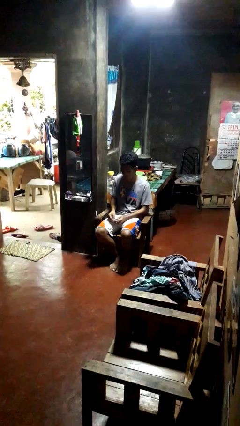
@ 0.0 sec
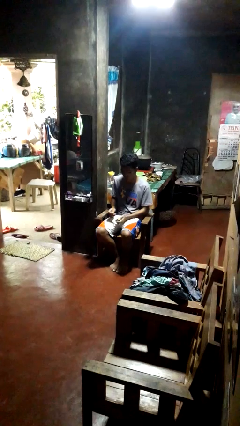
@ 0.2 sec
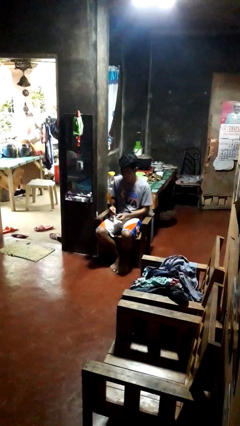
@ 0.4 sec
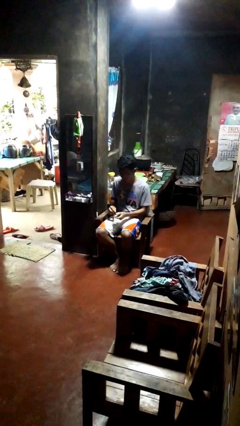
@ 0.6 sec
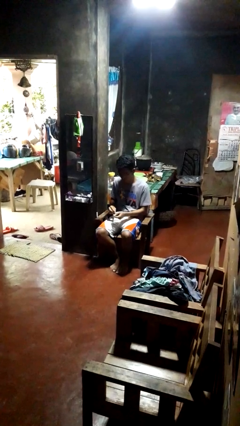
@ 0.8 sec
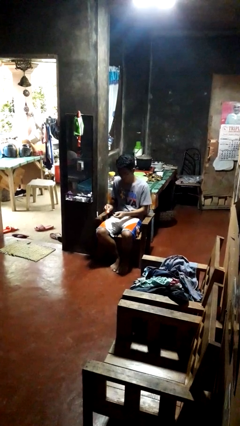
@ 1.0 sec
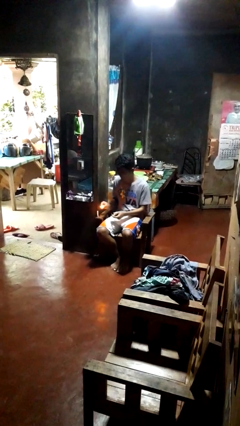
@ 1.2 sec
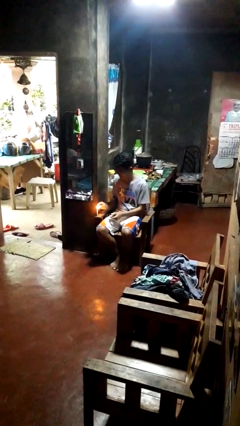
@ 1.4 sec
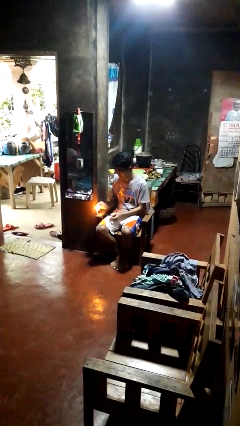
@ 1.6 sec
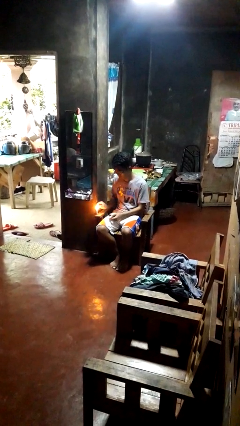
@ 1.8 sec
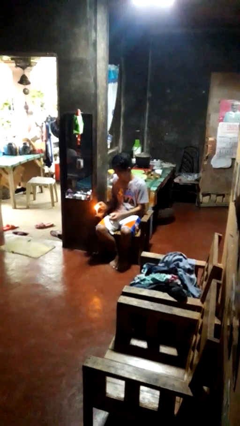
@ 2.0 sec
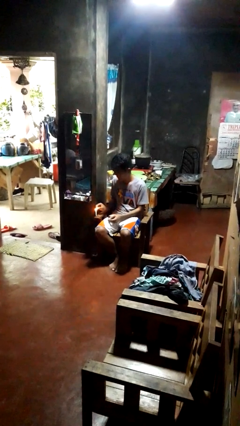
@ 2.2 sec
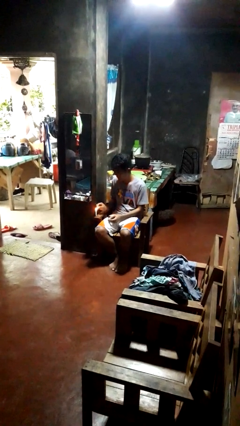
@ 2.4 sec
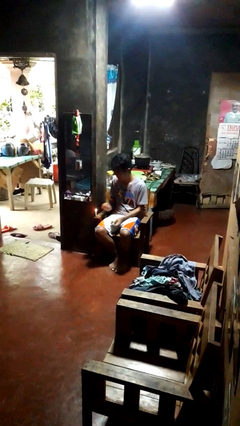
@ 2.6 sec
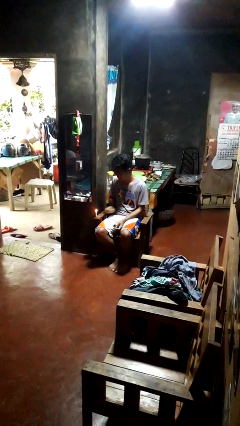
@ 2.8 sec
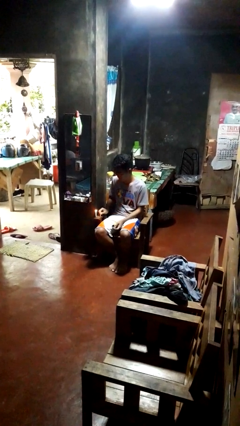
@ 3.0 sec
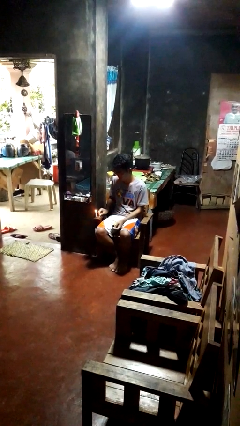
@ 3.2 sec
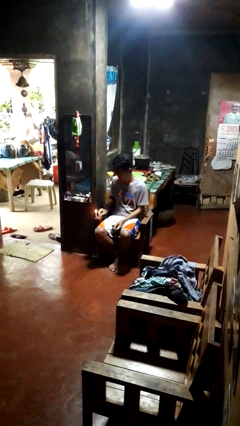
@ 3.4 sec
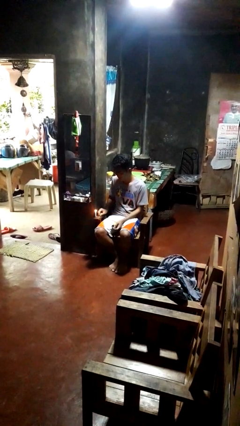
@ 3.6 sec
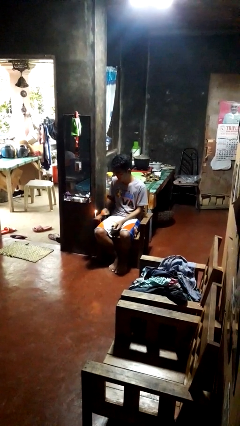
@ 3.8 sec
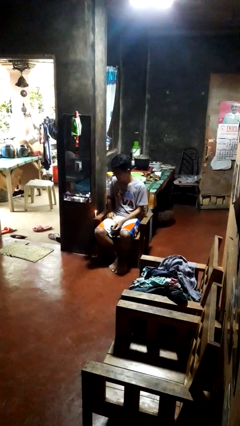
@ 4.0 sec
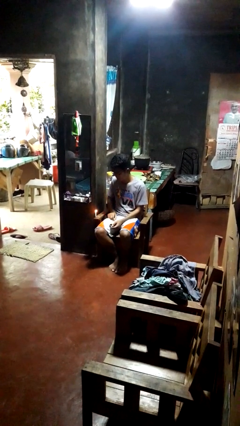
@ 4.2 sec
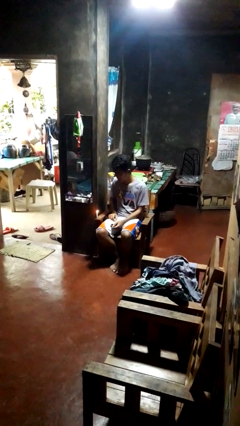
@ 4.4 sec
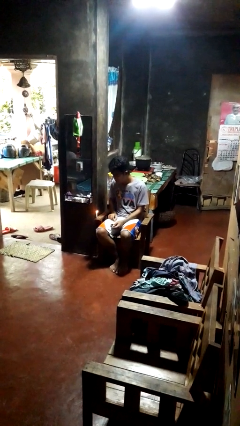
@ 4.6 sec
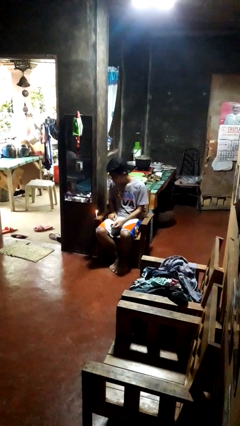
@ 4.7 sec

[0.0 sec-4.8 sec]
person lights candle

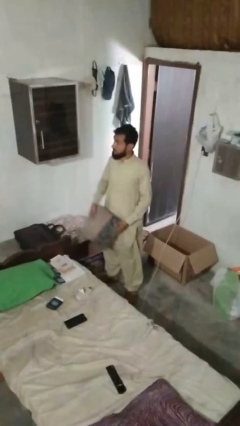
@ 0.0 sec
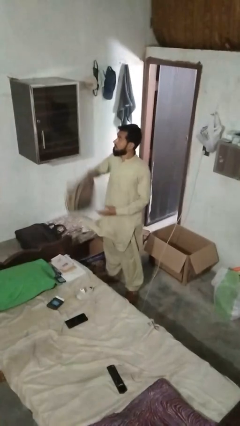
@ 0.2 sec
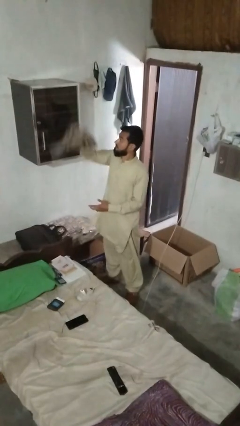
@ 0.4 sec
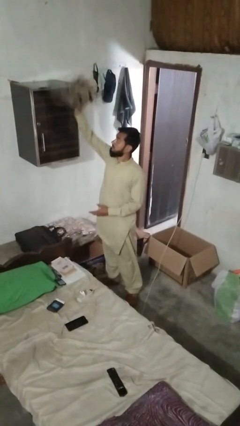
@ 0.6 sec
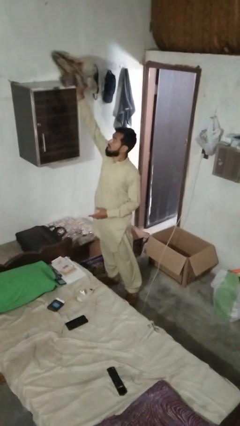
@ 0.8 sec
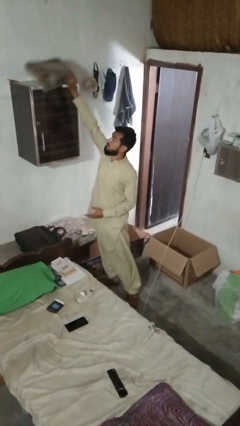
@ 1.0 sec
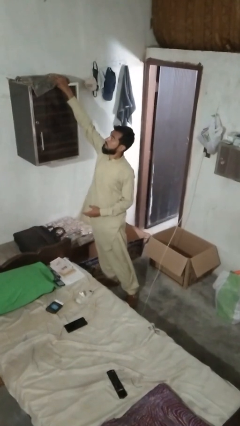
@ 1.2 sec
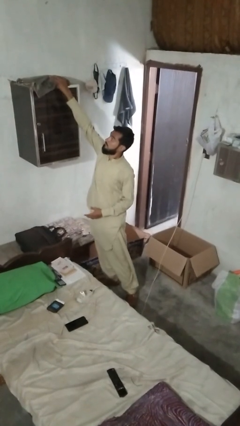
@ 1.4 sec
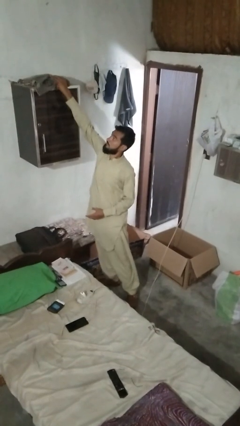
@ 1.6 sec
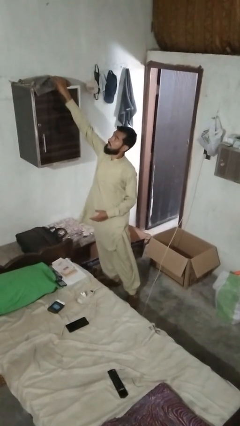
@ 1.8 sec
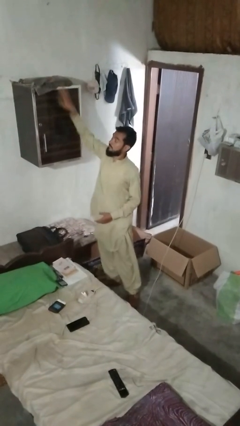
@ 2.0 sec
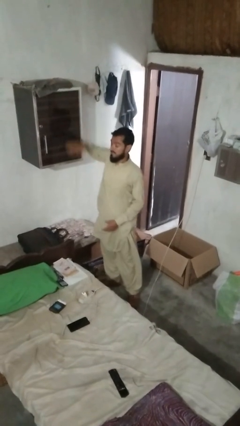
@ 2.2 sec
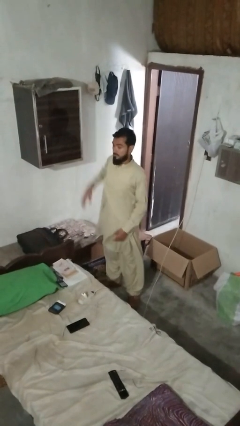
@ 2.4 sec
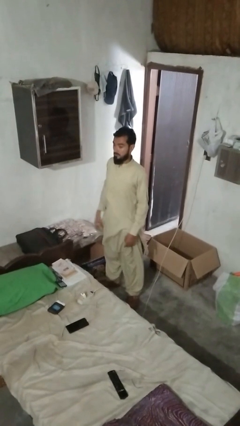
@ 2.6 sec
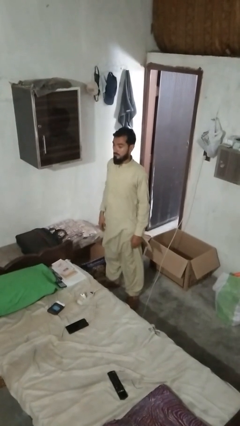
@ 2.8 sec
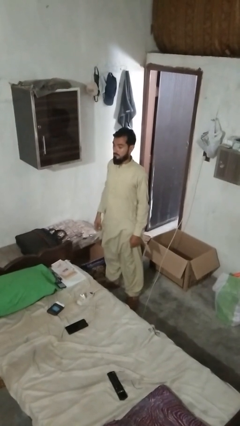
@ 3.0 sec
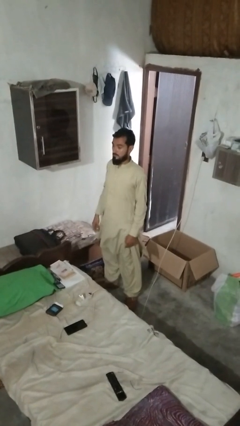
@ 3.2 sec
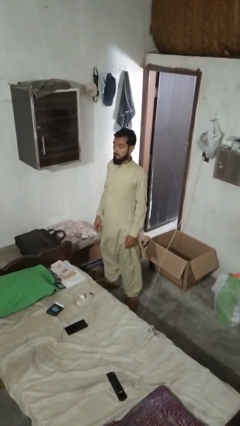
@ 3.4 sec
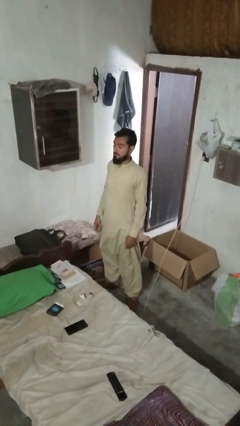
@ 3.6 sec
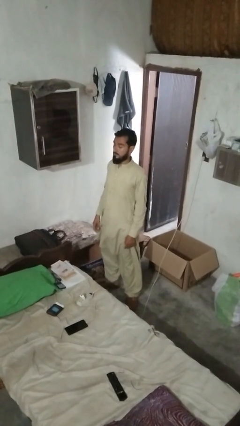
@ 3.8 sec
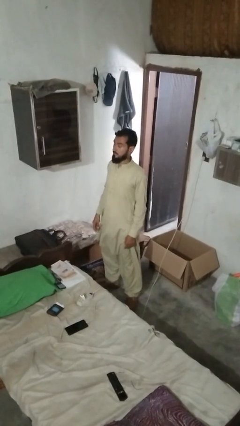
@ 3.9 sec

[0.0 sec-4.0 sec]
person picks up object from shelf

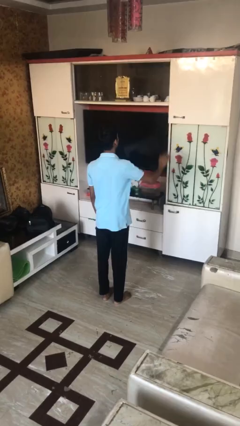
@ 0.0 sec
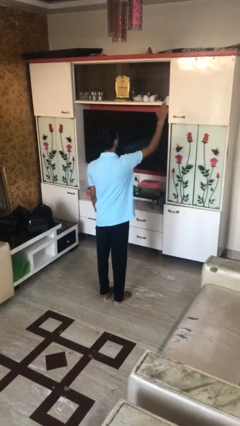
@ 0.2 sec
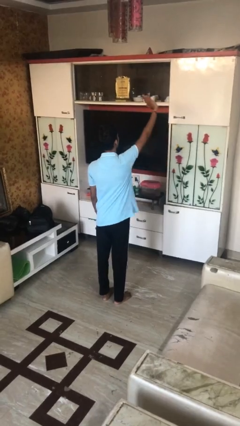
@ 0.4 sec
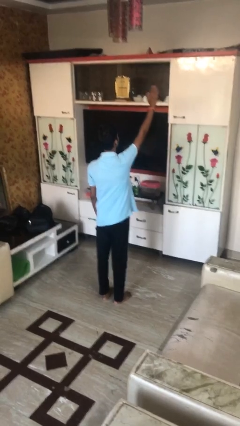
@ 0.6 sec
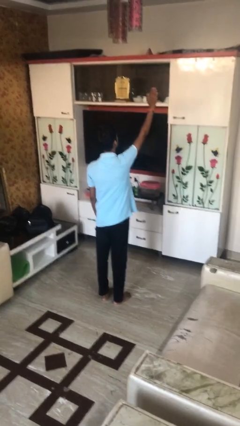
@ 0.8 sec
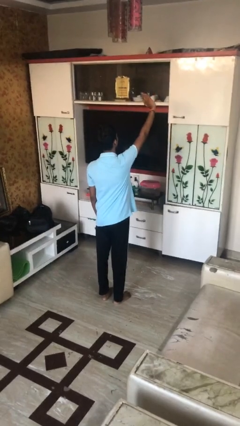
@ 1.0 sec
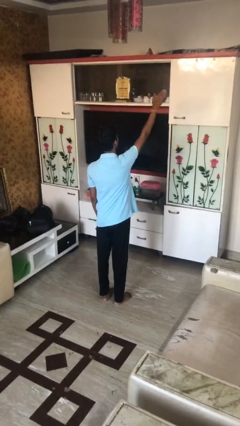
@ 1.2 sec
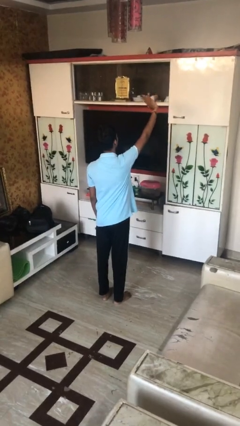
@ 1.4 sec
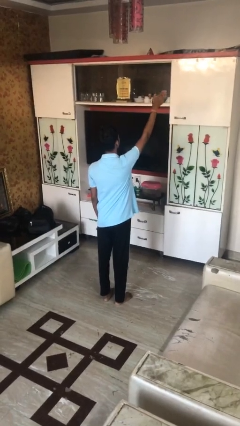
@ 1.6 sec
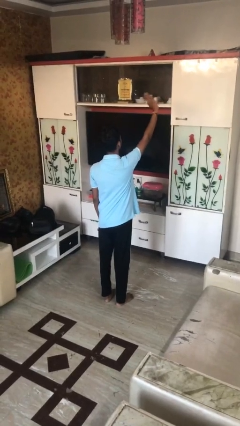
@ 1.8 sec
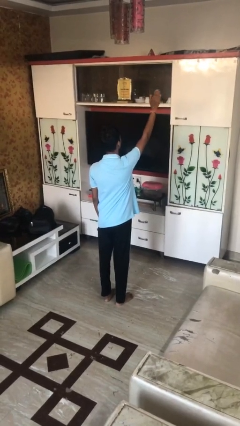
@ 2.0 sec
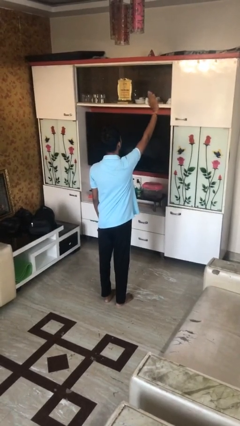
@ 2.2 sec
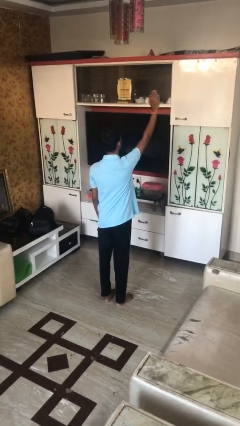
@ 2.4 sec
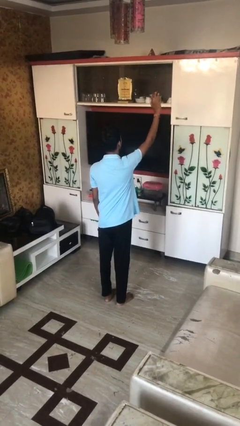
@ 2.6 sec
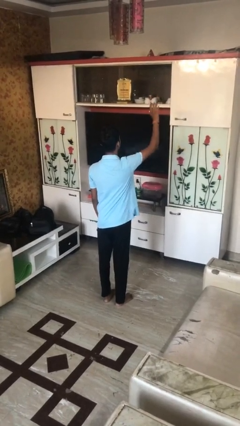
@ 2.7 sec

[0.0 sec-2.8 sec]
person waves at person

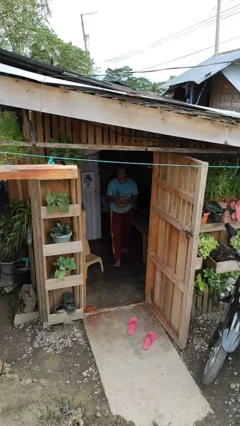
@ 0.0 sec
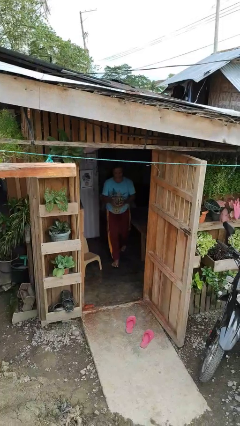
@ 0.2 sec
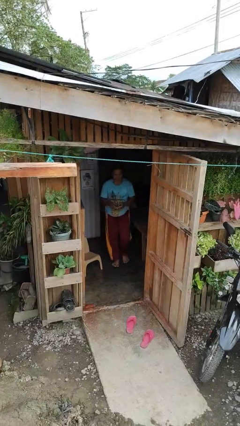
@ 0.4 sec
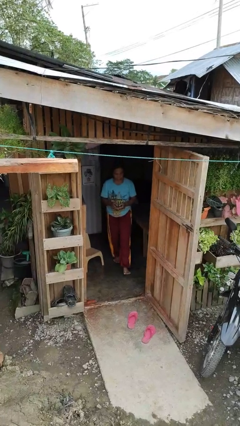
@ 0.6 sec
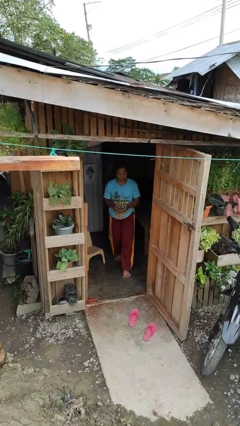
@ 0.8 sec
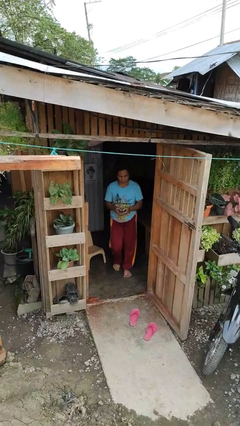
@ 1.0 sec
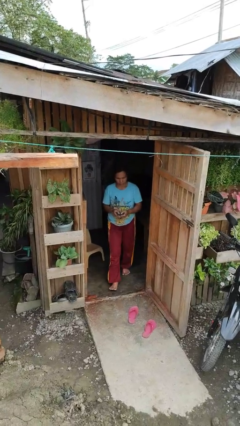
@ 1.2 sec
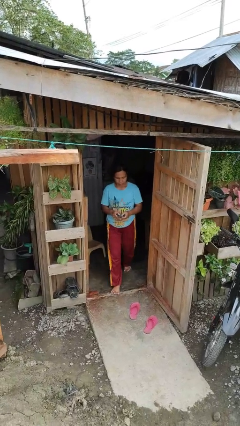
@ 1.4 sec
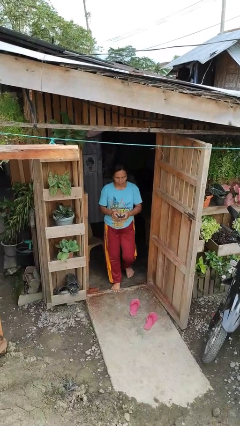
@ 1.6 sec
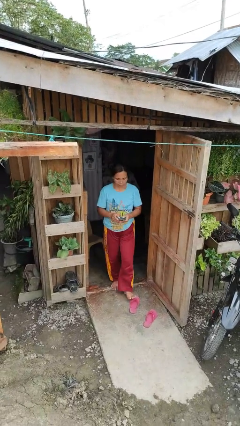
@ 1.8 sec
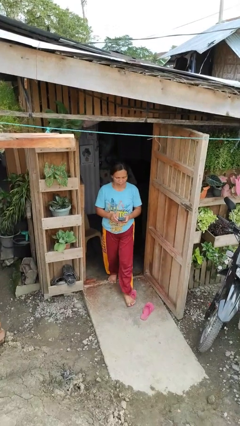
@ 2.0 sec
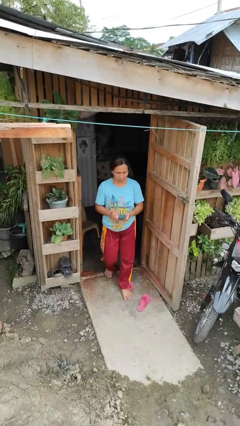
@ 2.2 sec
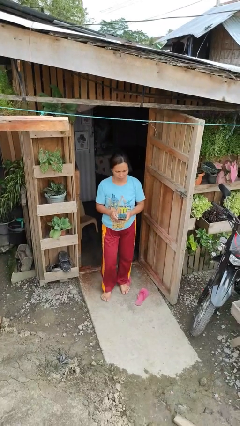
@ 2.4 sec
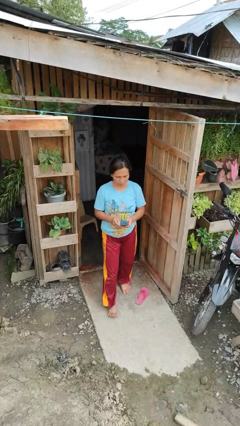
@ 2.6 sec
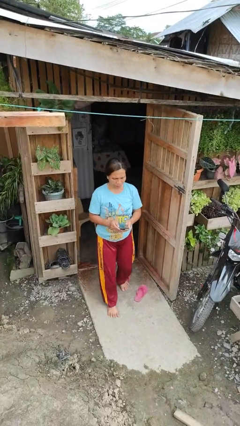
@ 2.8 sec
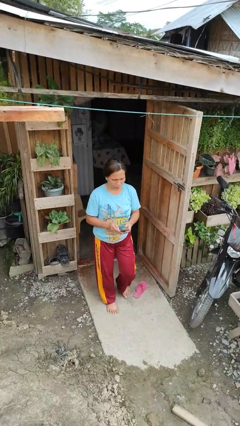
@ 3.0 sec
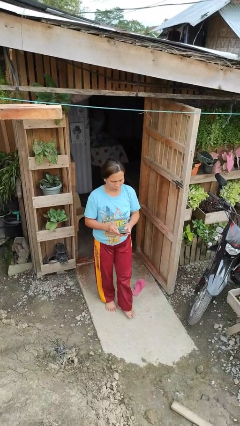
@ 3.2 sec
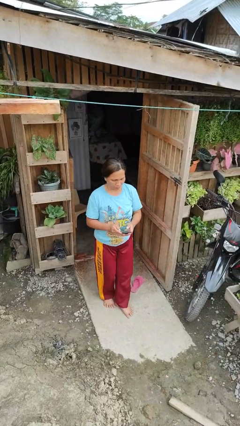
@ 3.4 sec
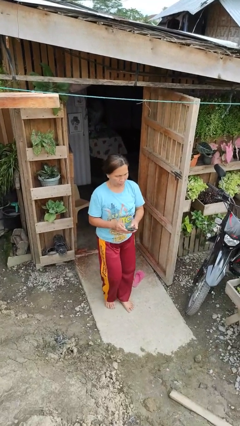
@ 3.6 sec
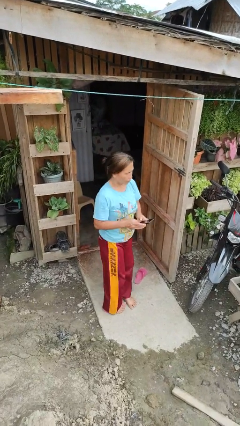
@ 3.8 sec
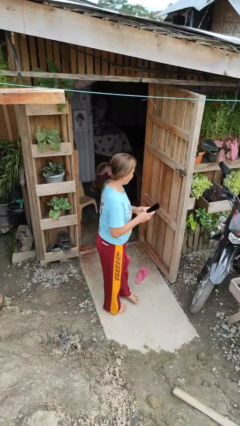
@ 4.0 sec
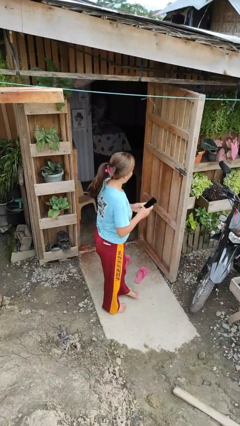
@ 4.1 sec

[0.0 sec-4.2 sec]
person enters scene through structure

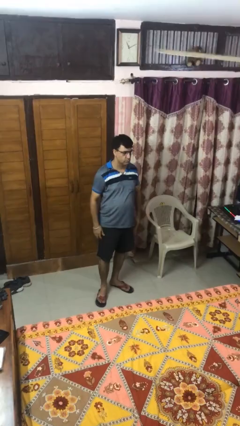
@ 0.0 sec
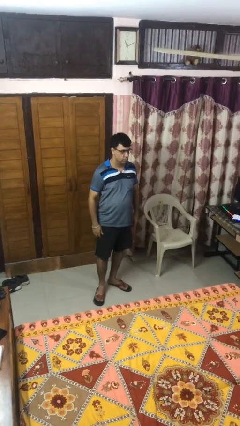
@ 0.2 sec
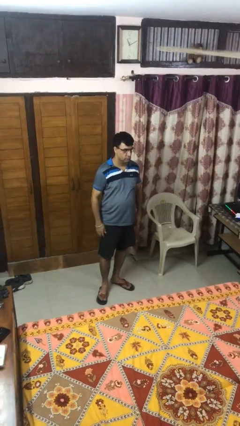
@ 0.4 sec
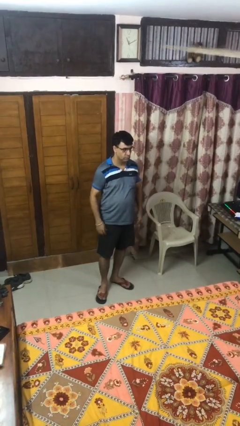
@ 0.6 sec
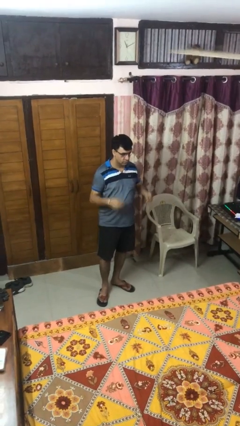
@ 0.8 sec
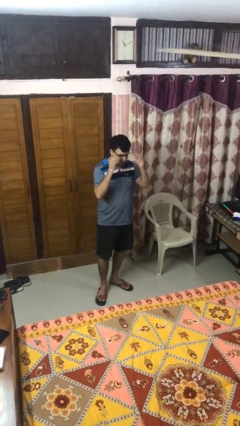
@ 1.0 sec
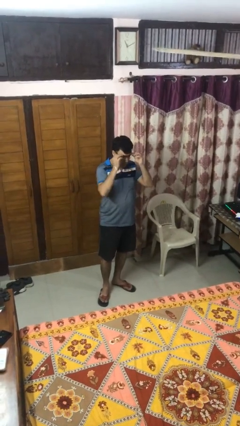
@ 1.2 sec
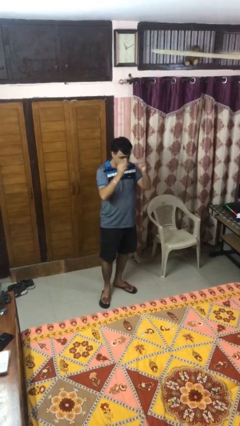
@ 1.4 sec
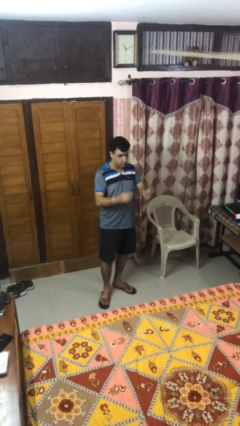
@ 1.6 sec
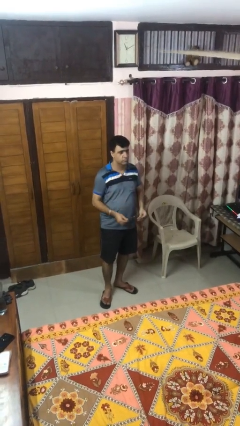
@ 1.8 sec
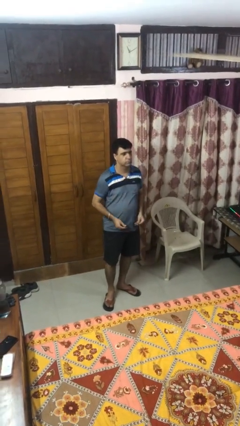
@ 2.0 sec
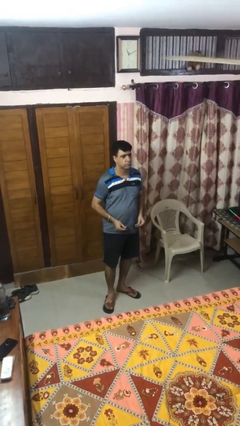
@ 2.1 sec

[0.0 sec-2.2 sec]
person takes off glasses
